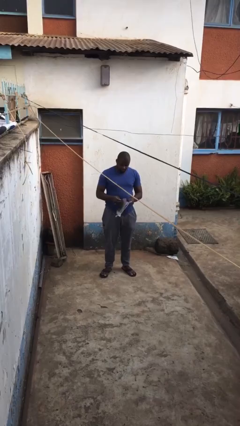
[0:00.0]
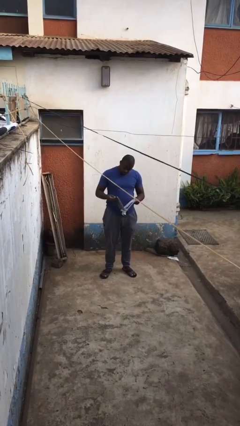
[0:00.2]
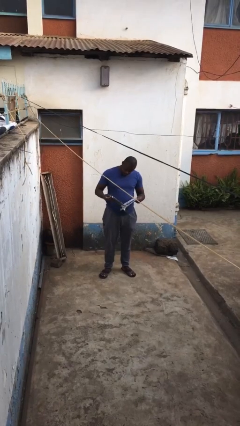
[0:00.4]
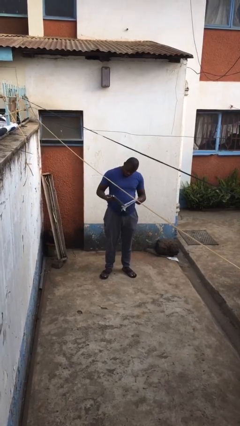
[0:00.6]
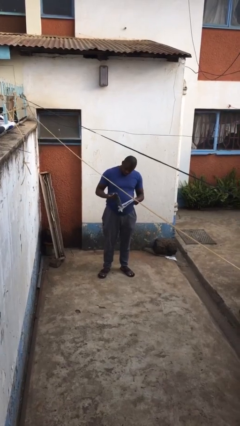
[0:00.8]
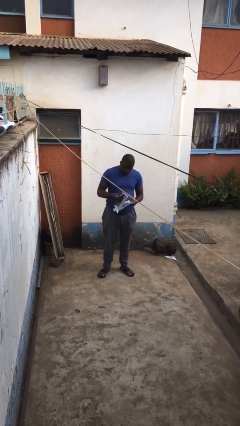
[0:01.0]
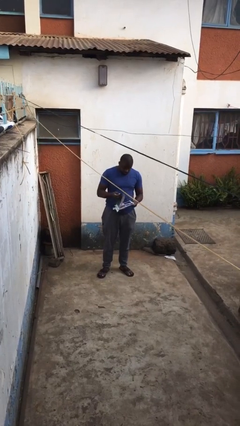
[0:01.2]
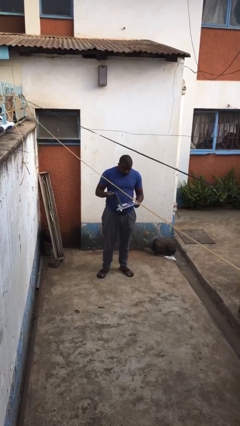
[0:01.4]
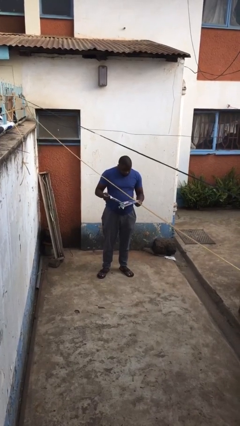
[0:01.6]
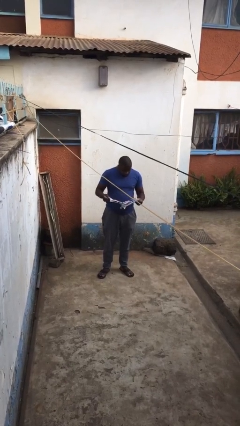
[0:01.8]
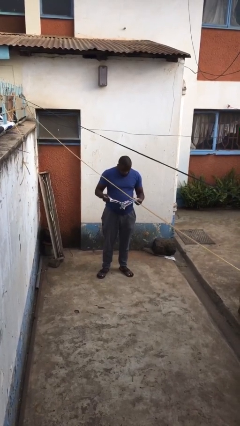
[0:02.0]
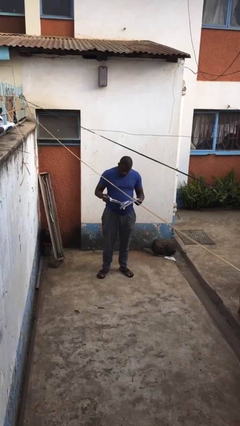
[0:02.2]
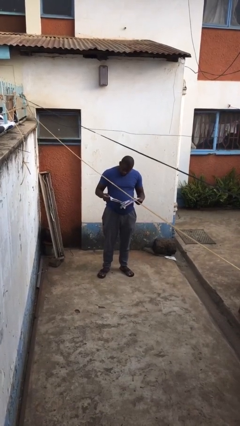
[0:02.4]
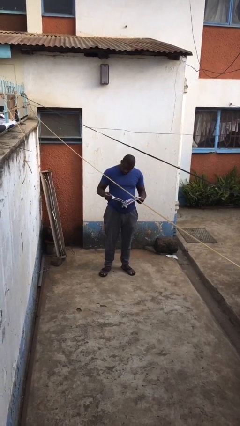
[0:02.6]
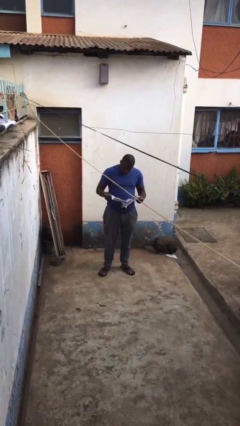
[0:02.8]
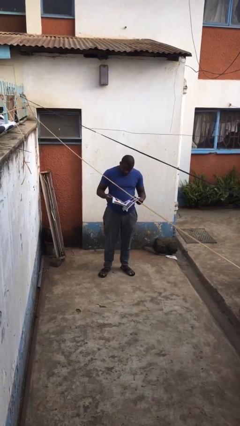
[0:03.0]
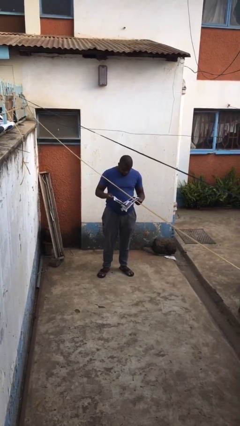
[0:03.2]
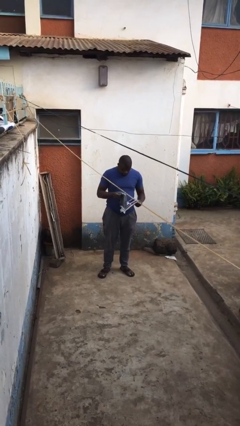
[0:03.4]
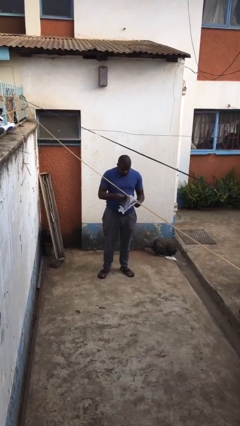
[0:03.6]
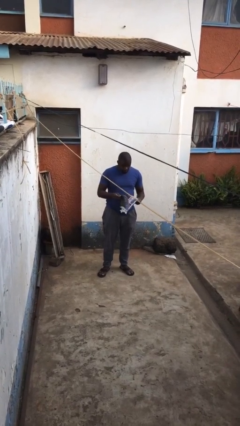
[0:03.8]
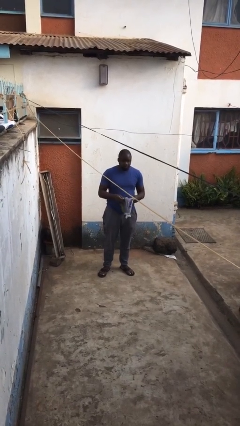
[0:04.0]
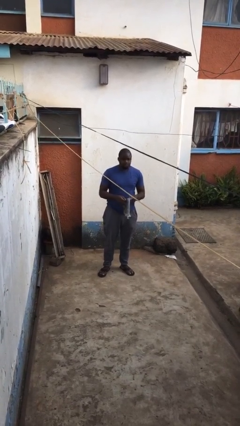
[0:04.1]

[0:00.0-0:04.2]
person reads magazine

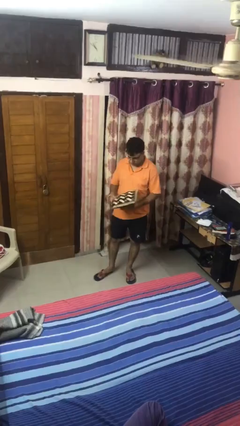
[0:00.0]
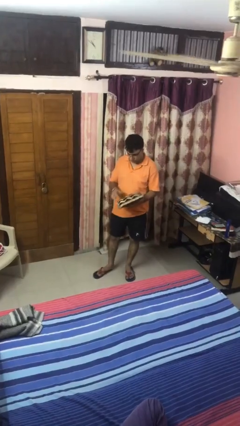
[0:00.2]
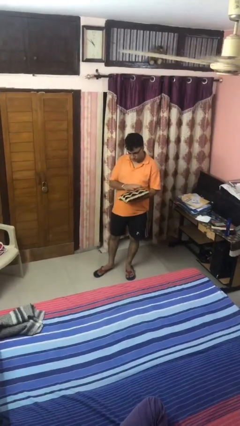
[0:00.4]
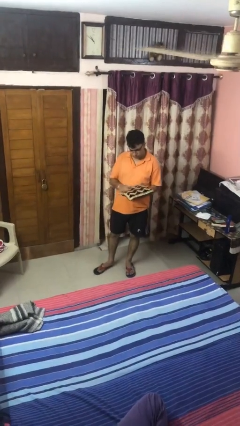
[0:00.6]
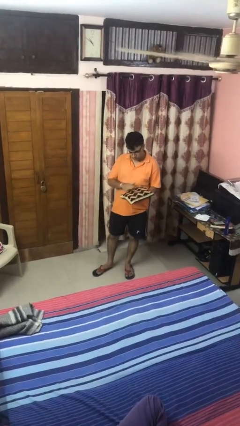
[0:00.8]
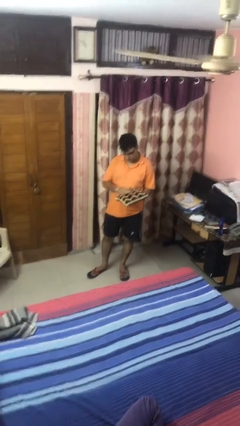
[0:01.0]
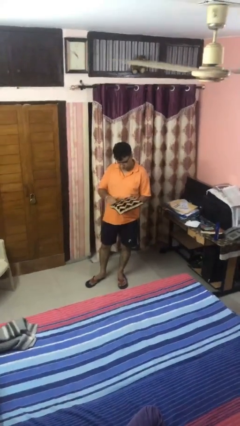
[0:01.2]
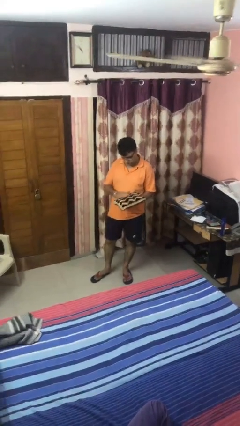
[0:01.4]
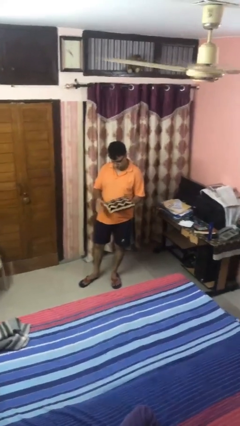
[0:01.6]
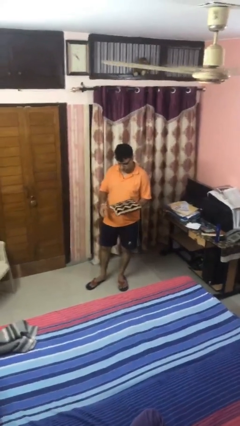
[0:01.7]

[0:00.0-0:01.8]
person waves hand over object

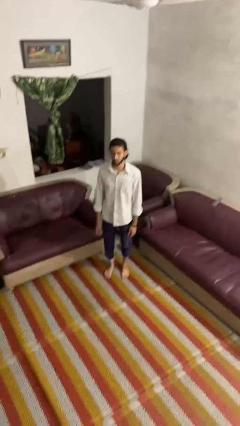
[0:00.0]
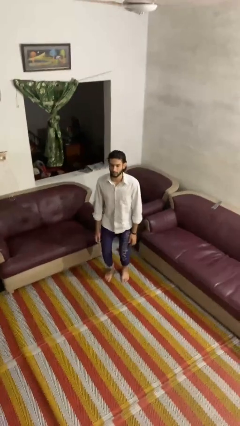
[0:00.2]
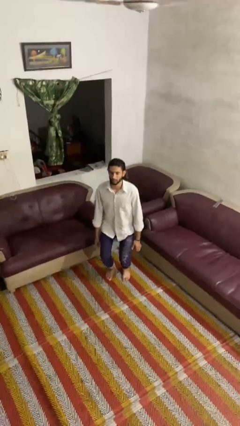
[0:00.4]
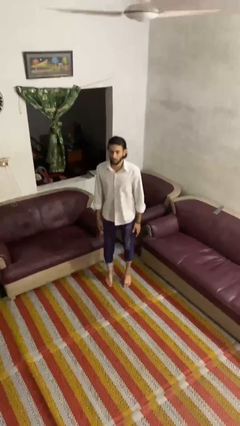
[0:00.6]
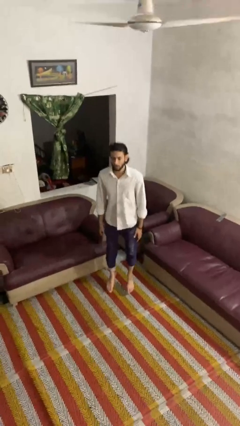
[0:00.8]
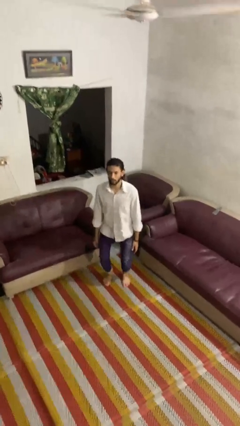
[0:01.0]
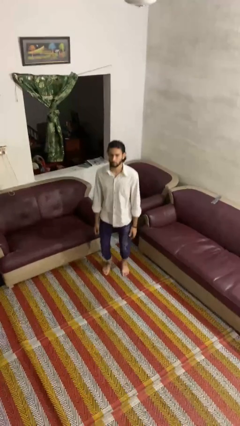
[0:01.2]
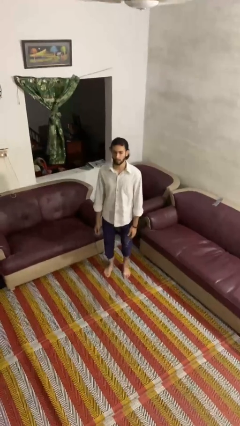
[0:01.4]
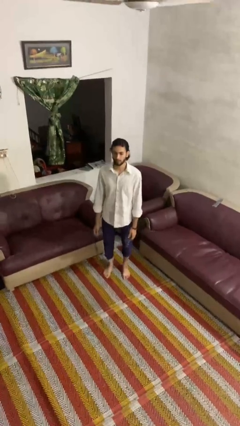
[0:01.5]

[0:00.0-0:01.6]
person jumps

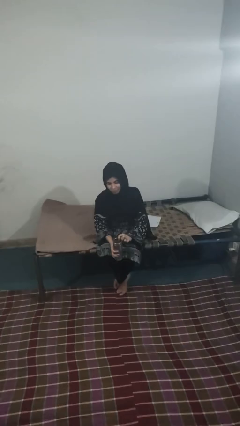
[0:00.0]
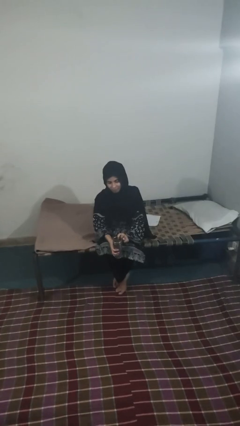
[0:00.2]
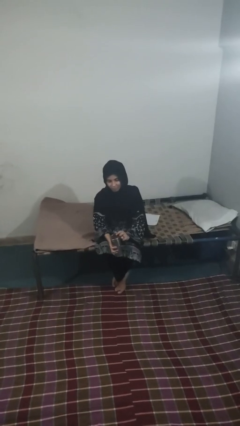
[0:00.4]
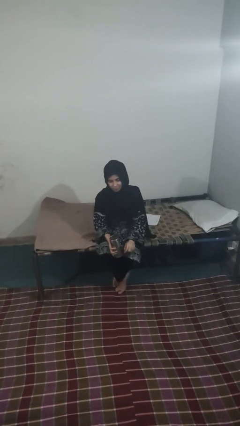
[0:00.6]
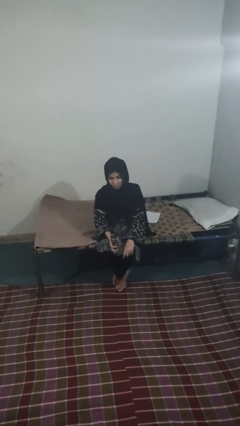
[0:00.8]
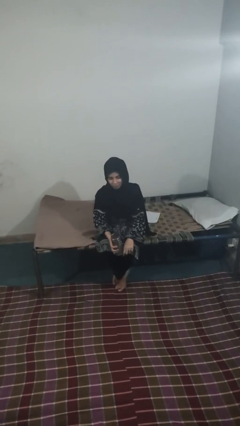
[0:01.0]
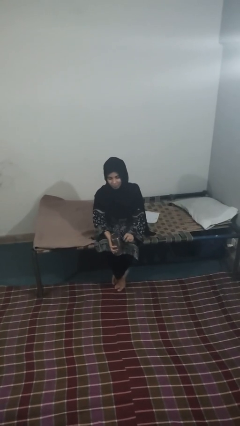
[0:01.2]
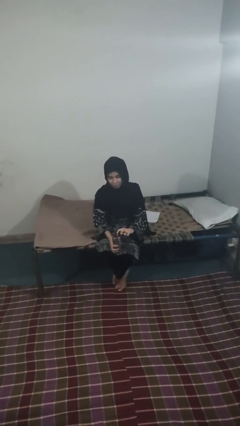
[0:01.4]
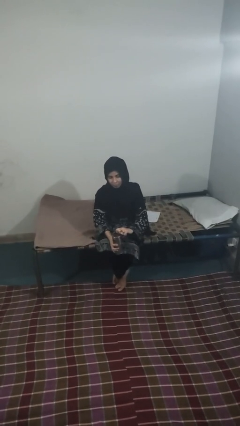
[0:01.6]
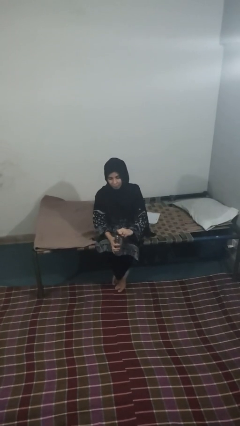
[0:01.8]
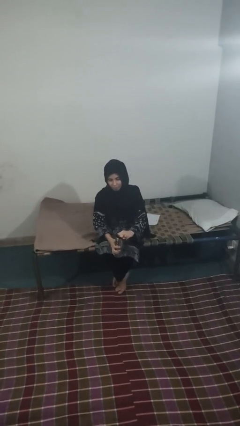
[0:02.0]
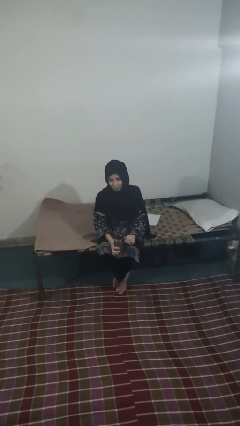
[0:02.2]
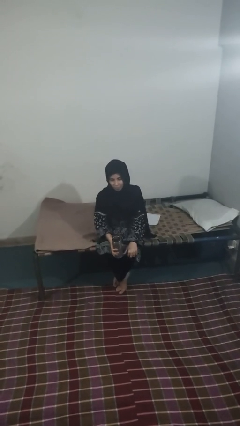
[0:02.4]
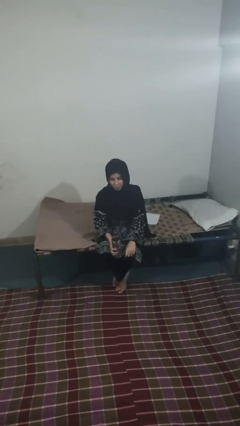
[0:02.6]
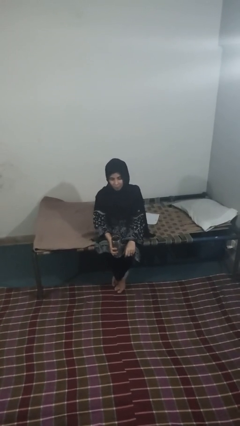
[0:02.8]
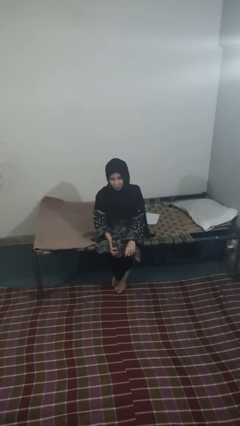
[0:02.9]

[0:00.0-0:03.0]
person opens beverage can

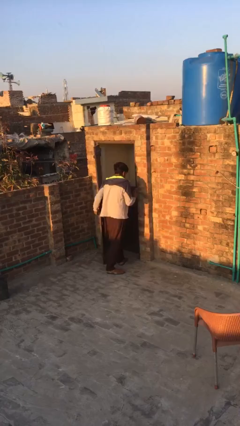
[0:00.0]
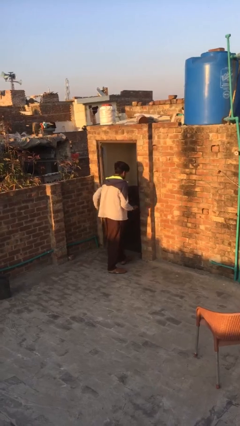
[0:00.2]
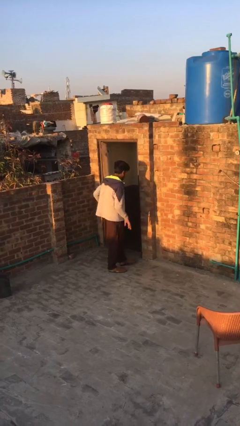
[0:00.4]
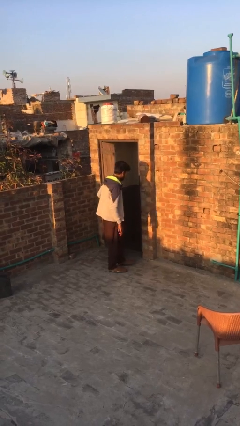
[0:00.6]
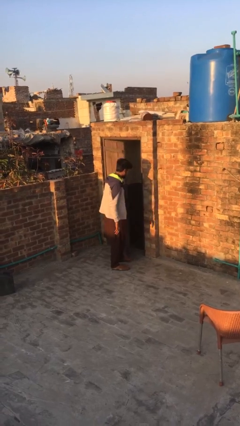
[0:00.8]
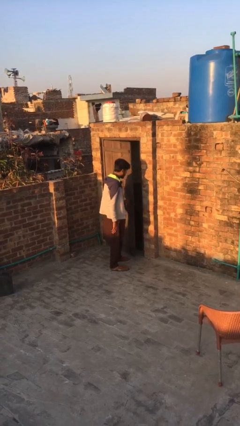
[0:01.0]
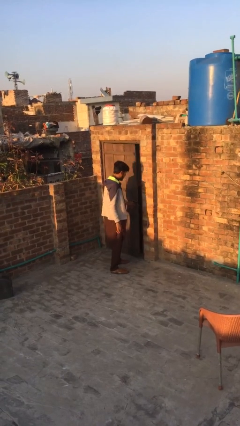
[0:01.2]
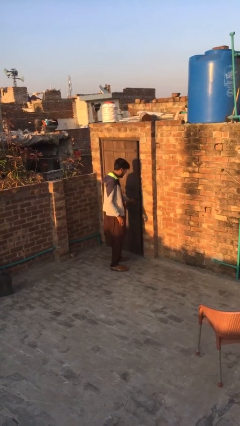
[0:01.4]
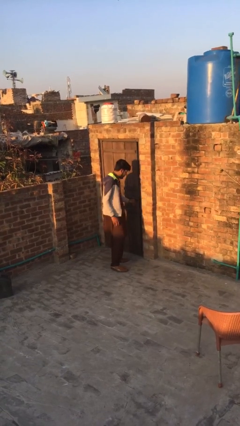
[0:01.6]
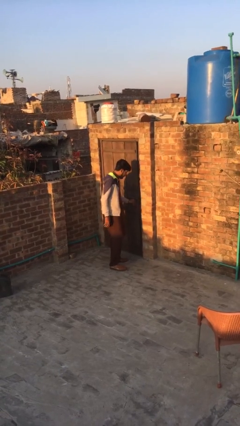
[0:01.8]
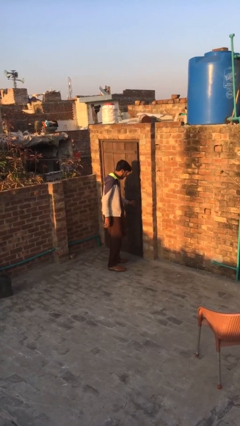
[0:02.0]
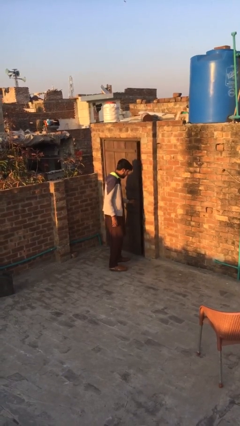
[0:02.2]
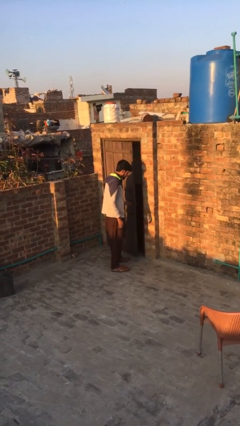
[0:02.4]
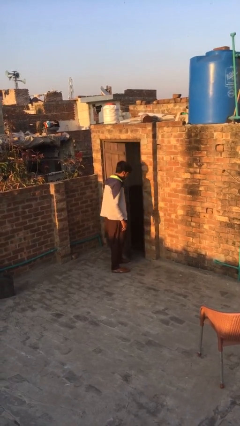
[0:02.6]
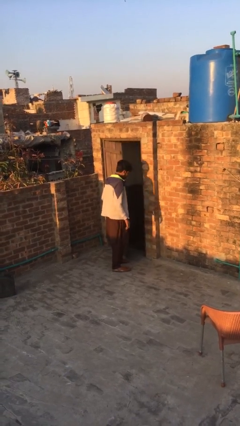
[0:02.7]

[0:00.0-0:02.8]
person closes facility door

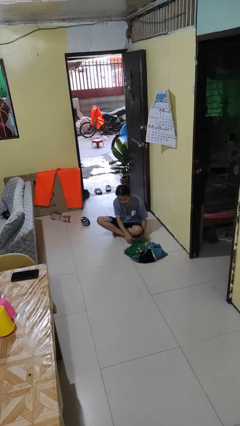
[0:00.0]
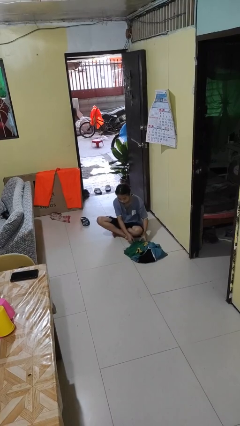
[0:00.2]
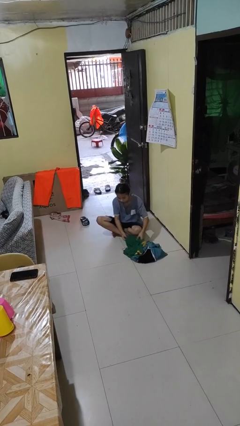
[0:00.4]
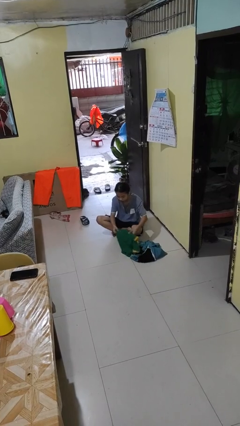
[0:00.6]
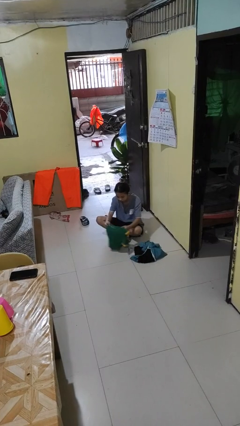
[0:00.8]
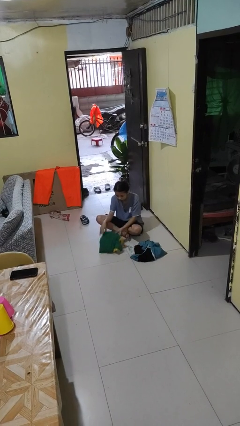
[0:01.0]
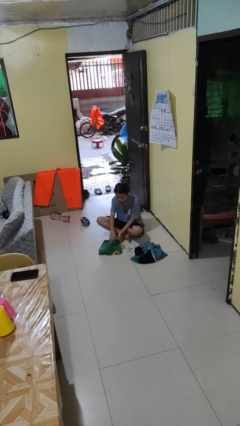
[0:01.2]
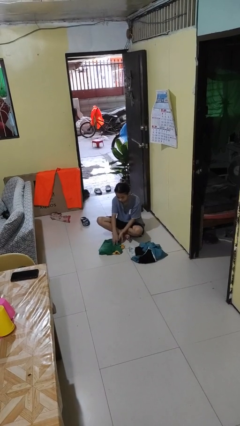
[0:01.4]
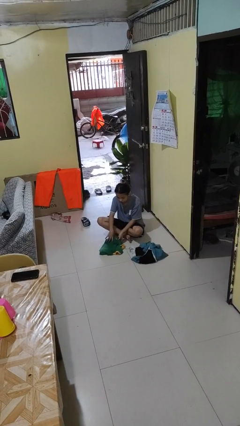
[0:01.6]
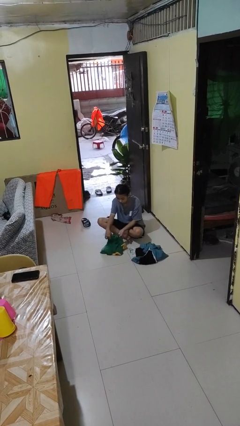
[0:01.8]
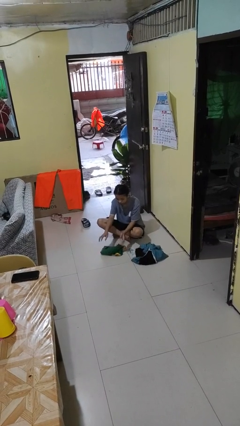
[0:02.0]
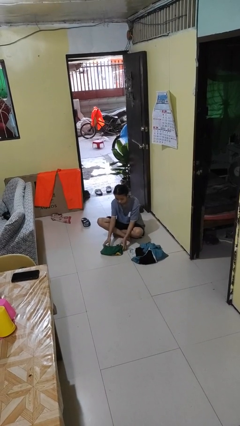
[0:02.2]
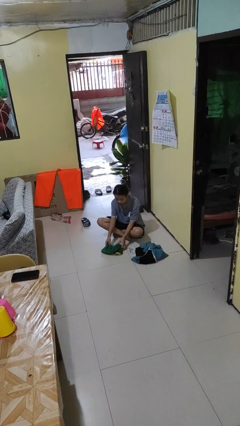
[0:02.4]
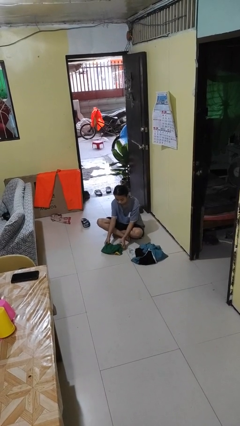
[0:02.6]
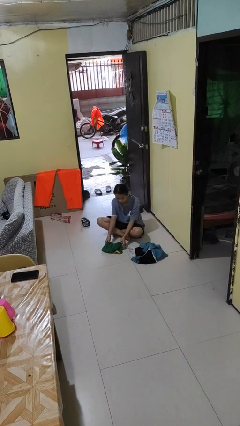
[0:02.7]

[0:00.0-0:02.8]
person folds shirt

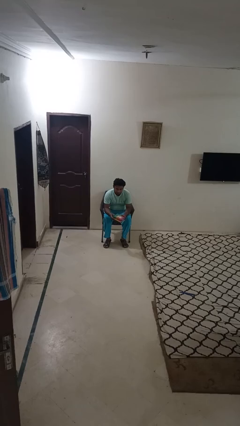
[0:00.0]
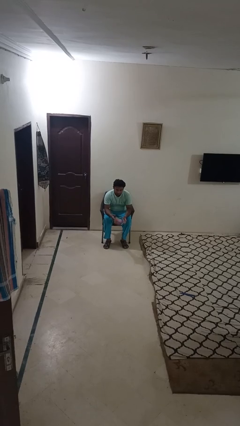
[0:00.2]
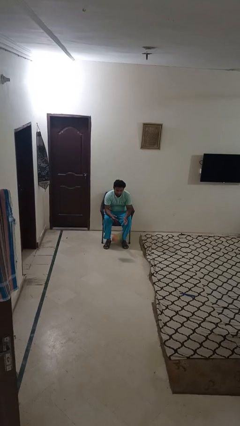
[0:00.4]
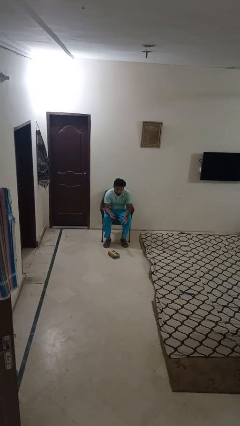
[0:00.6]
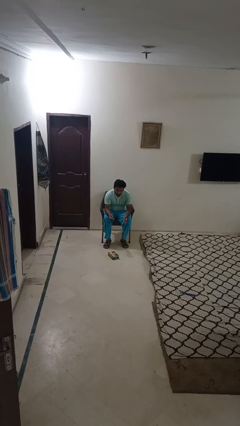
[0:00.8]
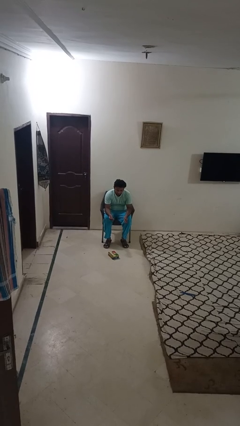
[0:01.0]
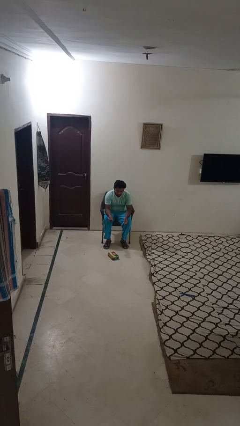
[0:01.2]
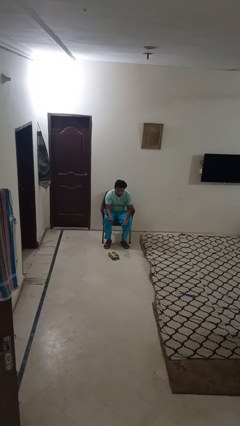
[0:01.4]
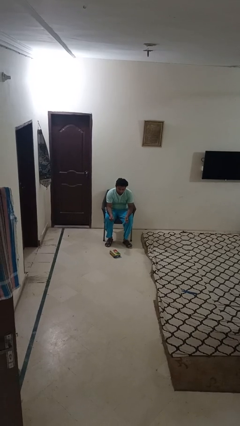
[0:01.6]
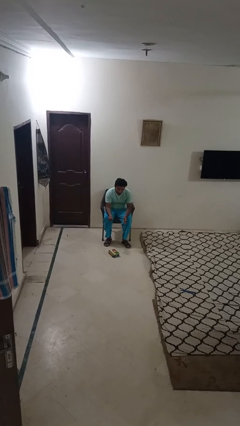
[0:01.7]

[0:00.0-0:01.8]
person drops object
